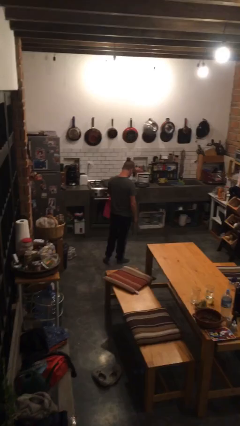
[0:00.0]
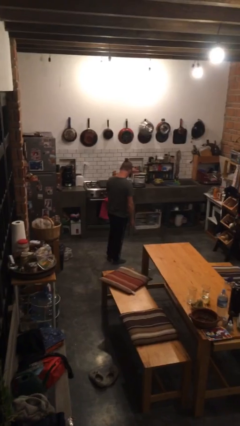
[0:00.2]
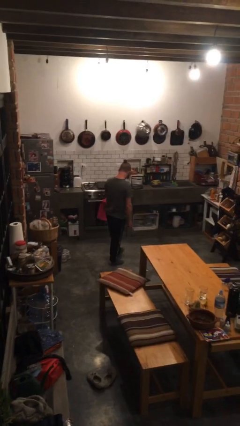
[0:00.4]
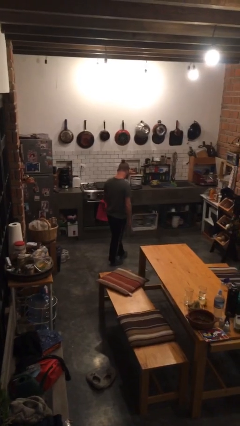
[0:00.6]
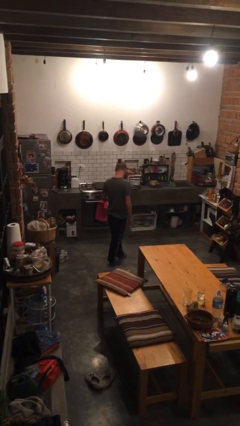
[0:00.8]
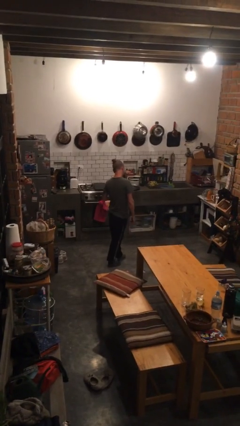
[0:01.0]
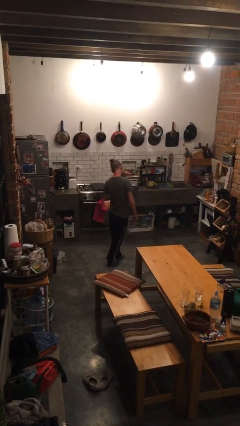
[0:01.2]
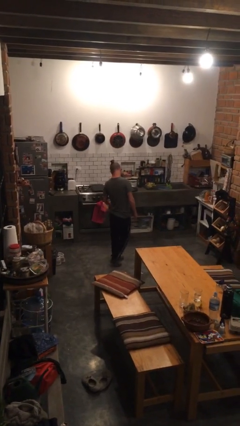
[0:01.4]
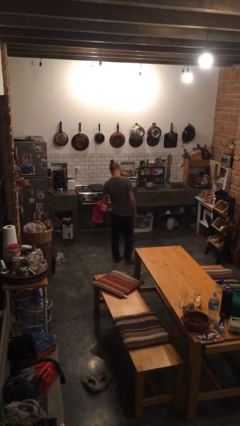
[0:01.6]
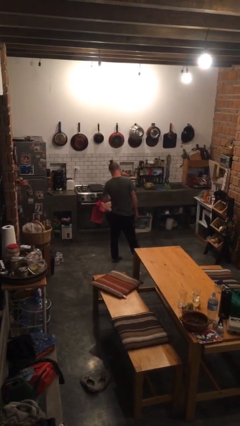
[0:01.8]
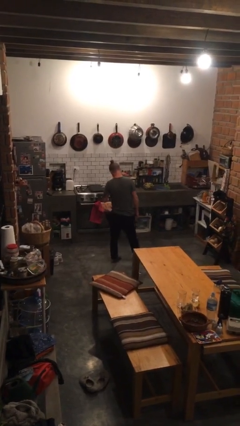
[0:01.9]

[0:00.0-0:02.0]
person bounces ball on floor

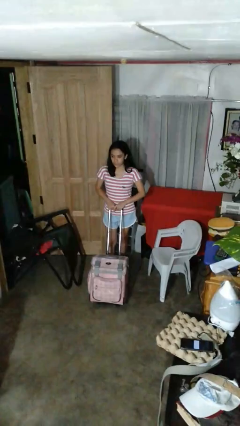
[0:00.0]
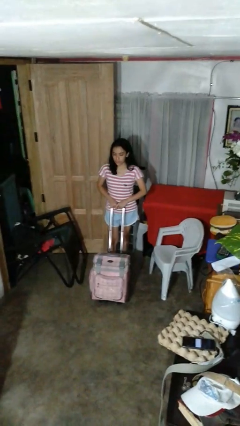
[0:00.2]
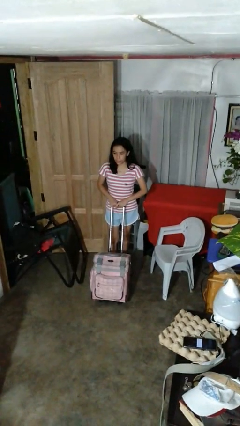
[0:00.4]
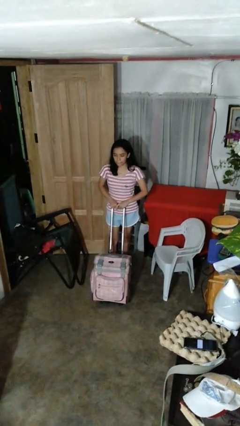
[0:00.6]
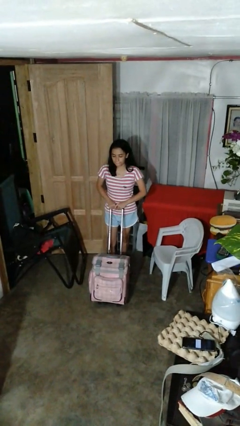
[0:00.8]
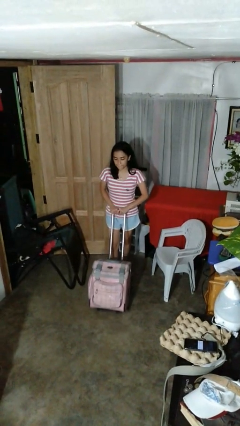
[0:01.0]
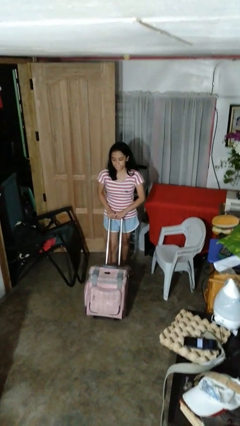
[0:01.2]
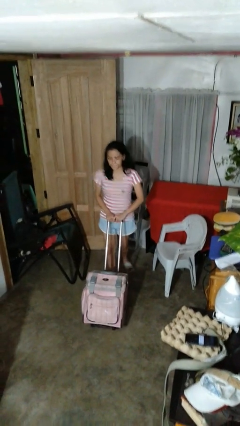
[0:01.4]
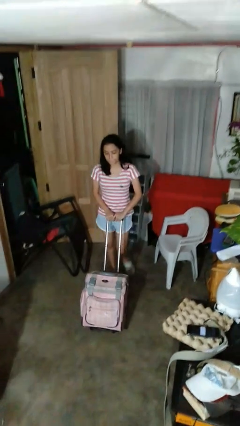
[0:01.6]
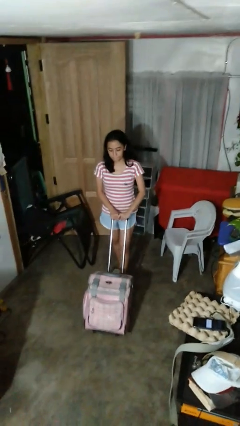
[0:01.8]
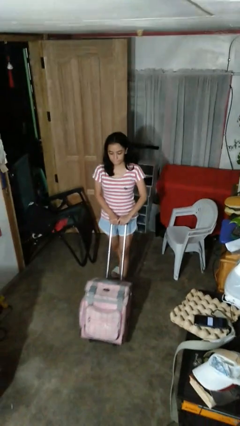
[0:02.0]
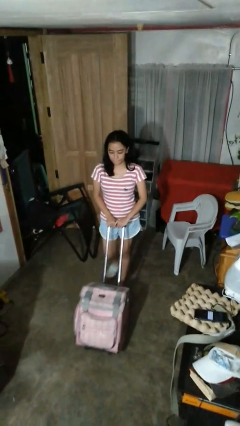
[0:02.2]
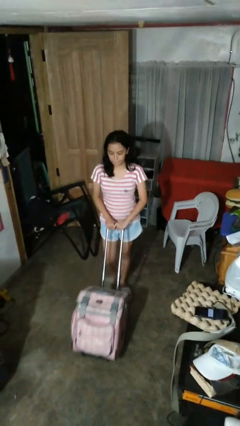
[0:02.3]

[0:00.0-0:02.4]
person pushes wheeled cart

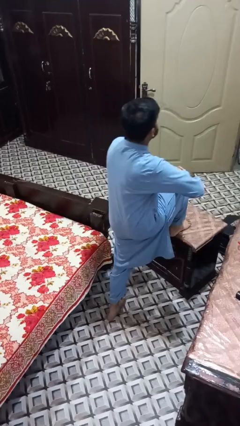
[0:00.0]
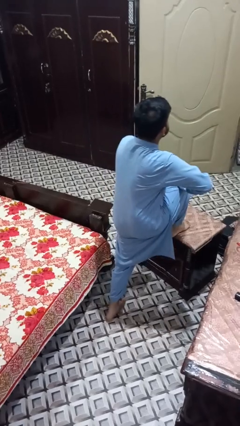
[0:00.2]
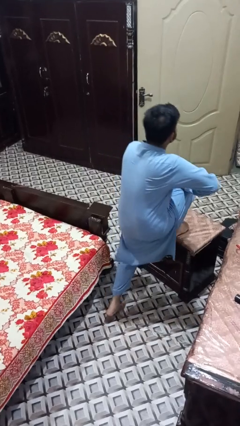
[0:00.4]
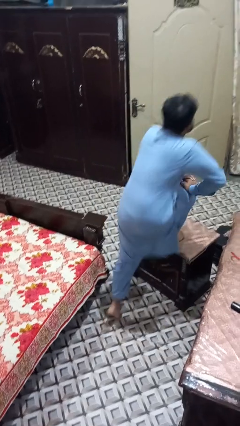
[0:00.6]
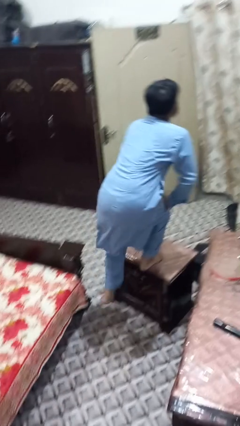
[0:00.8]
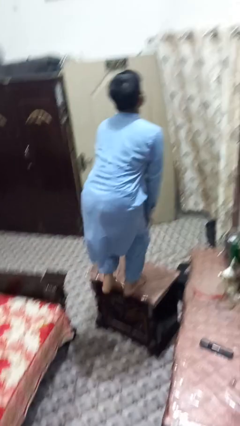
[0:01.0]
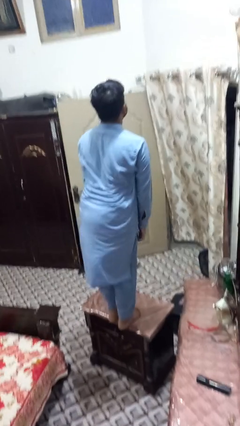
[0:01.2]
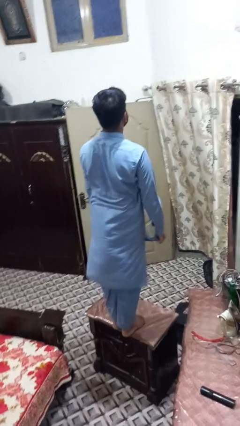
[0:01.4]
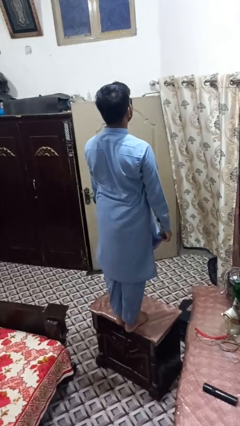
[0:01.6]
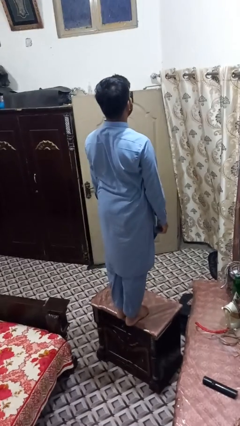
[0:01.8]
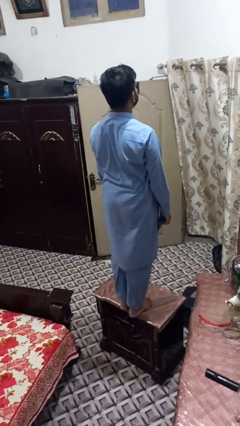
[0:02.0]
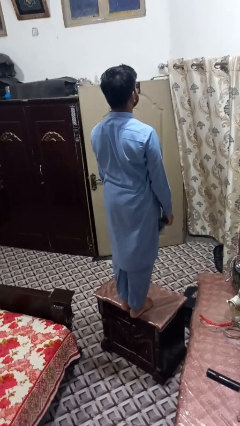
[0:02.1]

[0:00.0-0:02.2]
person climbs on table

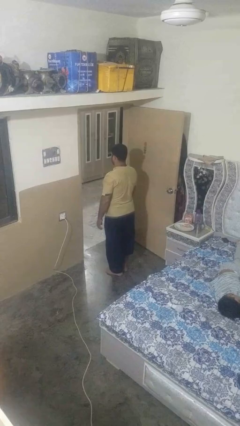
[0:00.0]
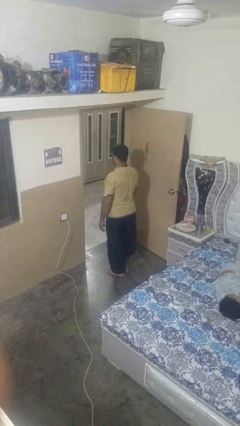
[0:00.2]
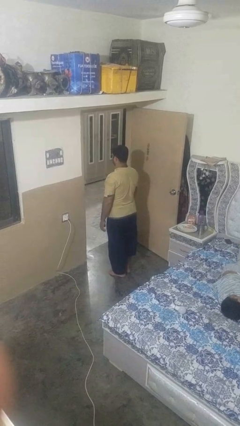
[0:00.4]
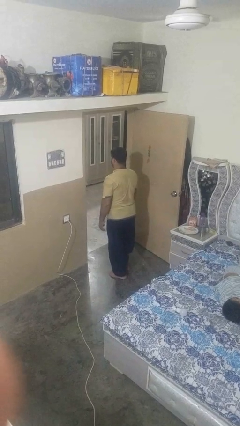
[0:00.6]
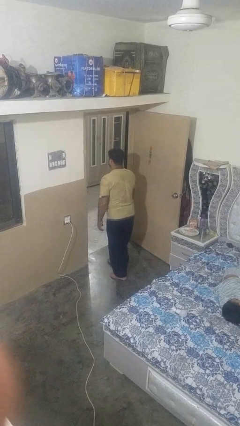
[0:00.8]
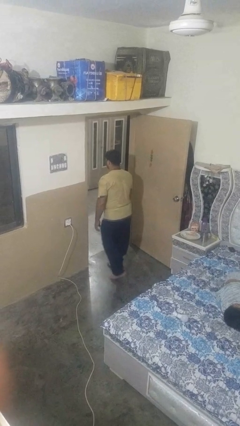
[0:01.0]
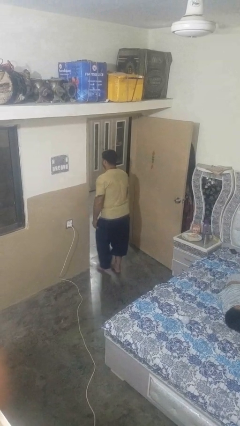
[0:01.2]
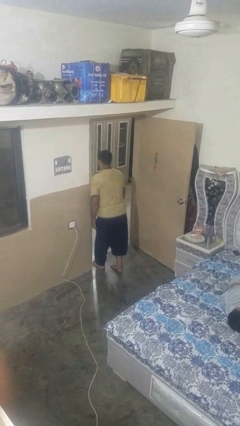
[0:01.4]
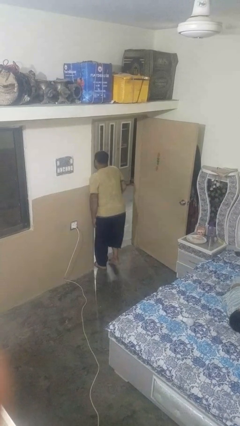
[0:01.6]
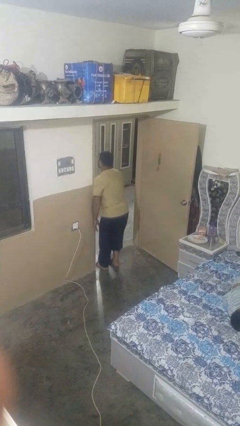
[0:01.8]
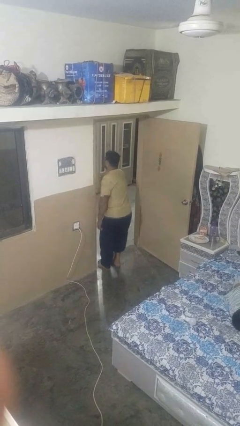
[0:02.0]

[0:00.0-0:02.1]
person bumps into wall

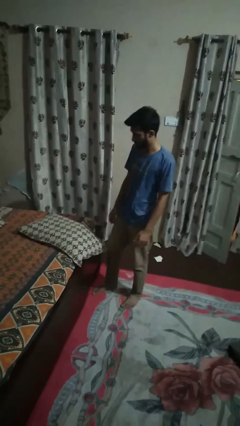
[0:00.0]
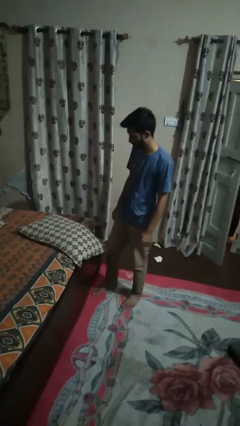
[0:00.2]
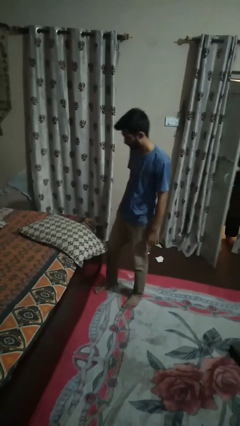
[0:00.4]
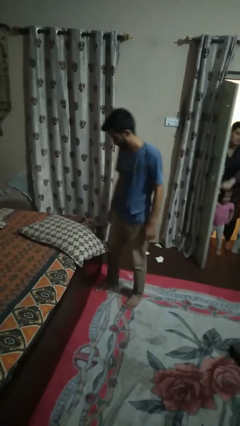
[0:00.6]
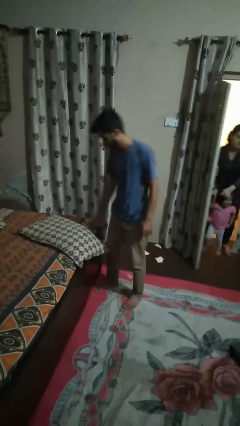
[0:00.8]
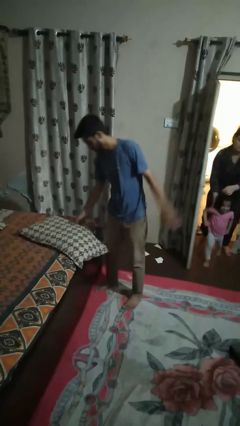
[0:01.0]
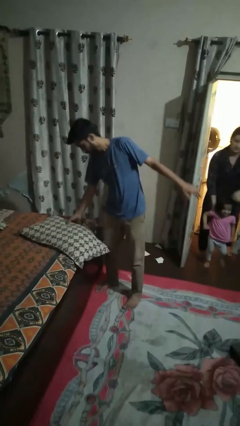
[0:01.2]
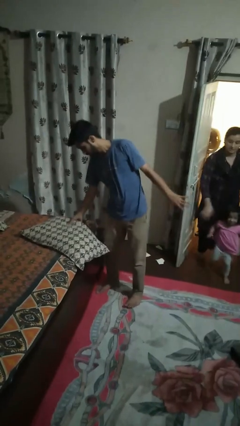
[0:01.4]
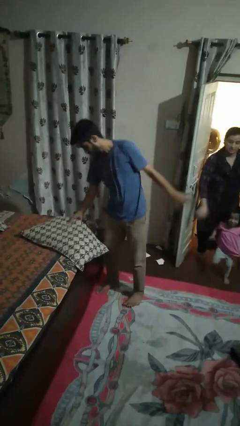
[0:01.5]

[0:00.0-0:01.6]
person puts down object on bed

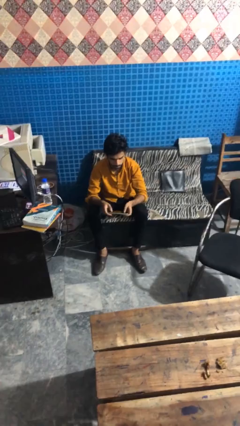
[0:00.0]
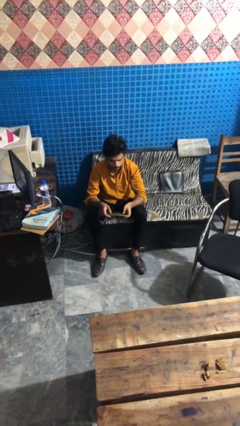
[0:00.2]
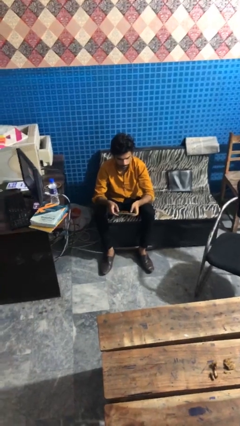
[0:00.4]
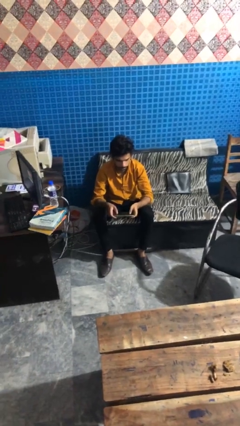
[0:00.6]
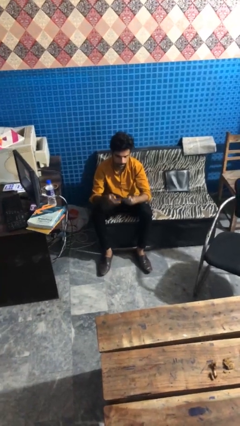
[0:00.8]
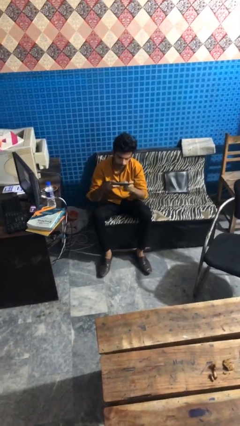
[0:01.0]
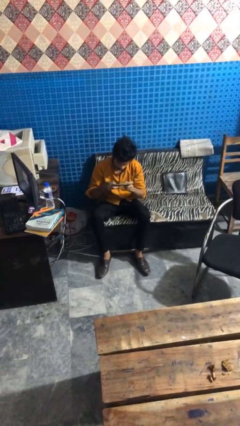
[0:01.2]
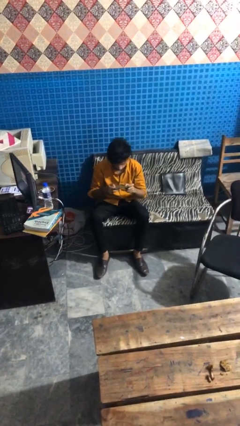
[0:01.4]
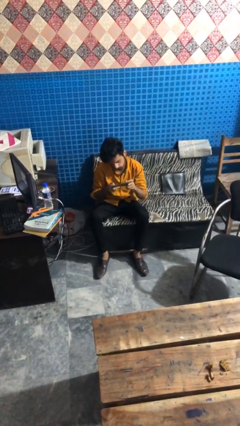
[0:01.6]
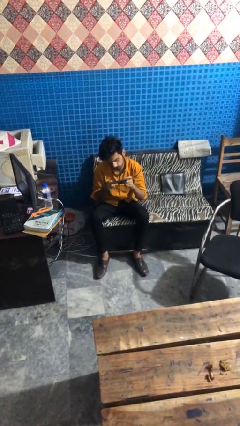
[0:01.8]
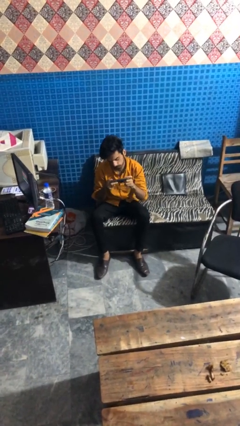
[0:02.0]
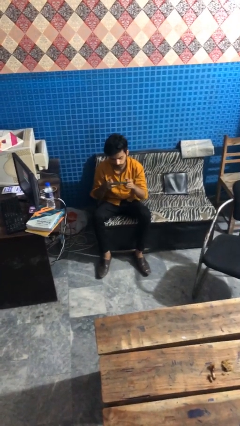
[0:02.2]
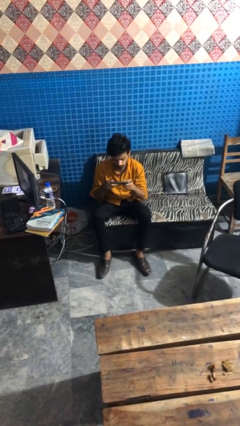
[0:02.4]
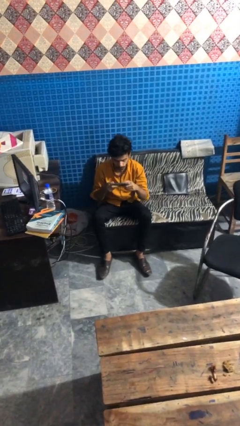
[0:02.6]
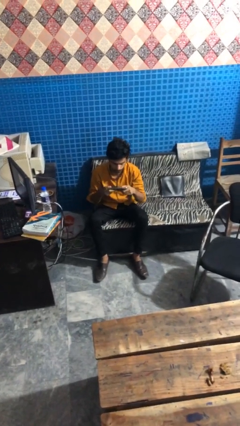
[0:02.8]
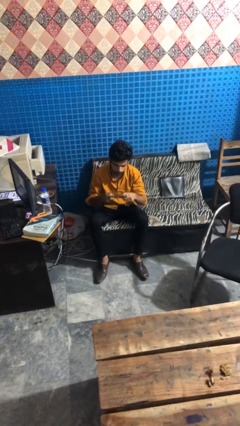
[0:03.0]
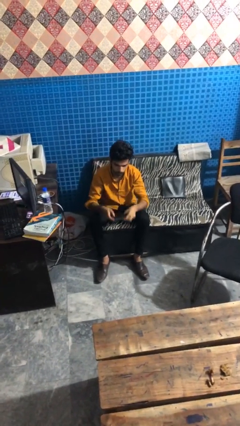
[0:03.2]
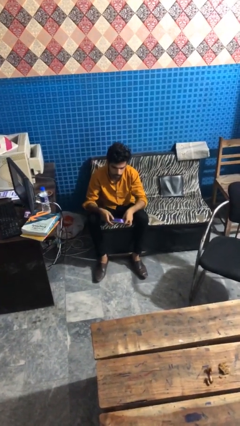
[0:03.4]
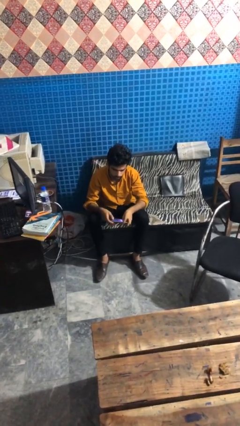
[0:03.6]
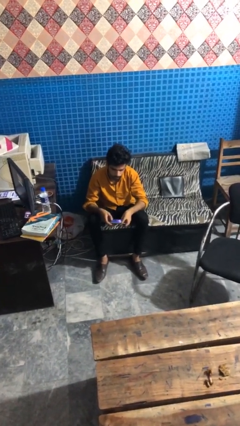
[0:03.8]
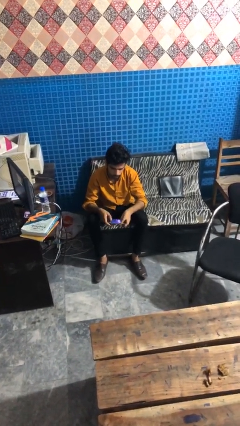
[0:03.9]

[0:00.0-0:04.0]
person interacts with handheld game

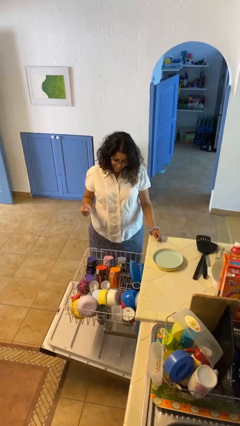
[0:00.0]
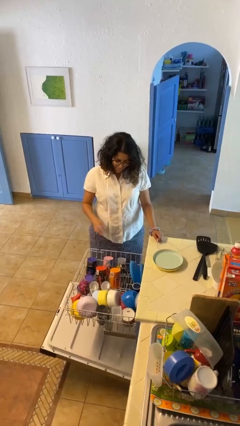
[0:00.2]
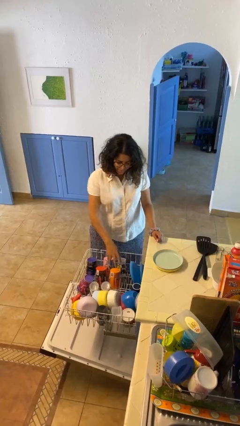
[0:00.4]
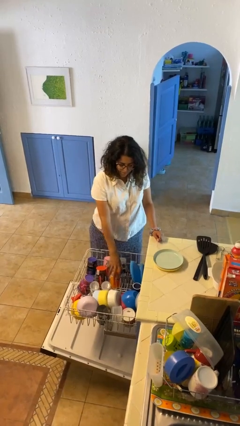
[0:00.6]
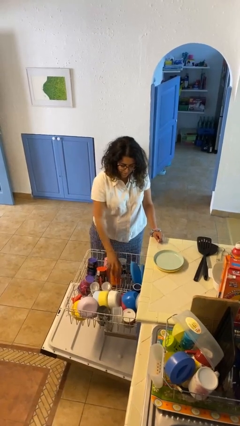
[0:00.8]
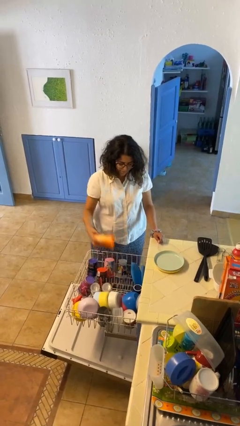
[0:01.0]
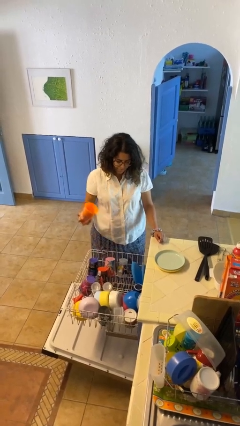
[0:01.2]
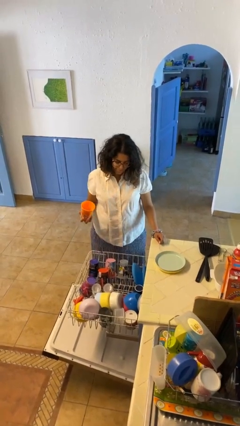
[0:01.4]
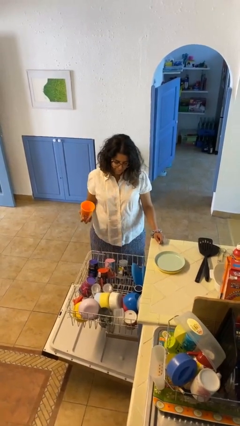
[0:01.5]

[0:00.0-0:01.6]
person unloads dishwasher

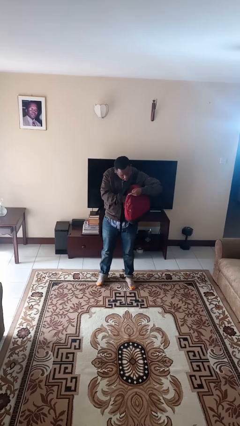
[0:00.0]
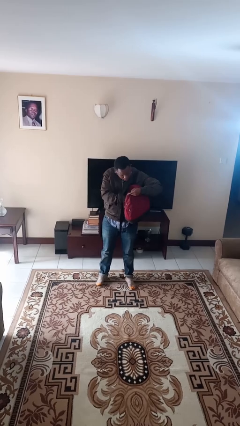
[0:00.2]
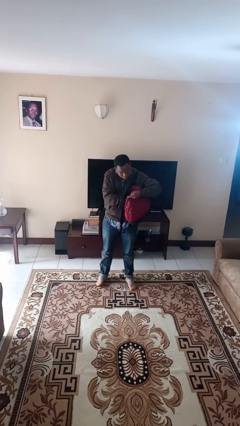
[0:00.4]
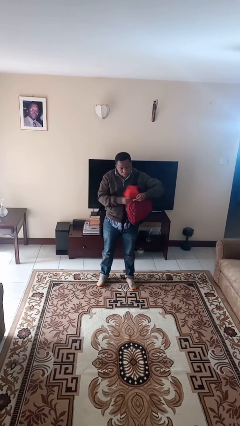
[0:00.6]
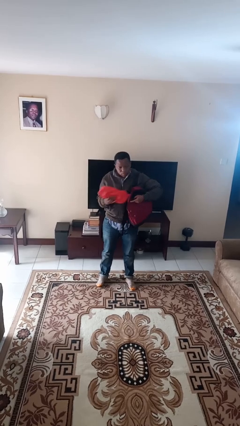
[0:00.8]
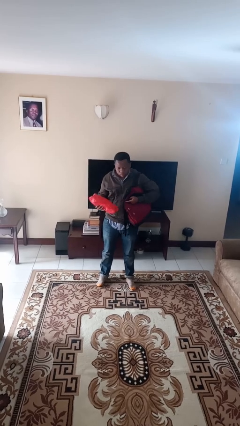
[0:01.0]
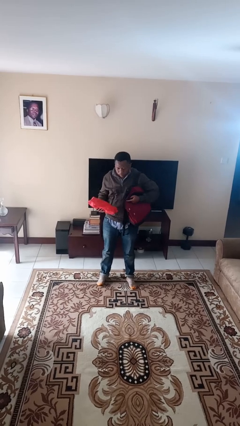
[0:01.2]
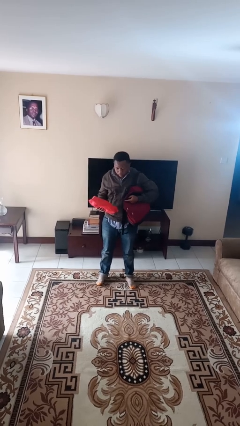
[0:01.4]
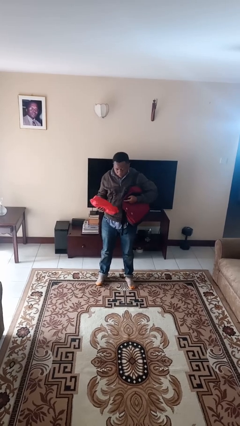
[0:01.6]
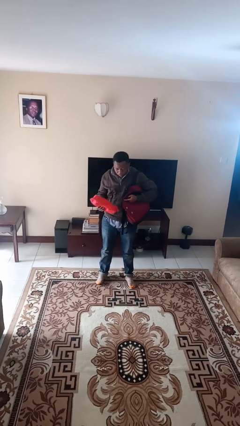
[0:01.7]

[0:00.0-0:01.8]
person takes object from backpack
